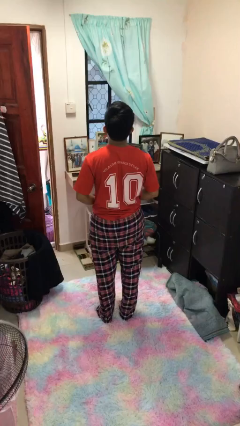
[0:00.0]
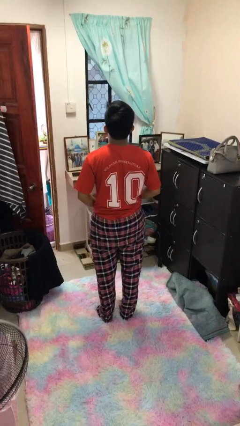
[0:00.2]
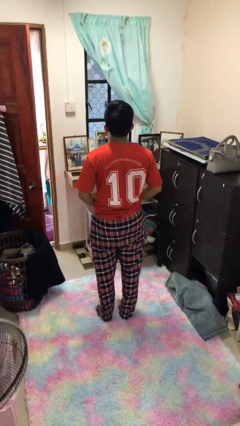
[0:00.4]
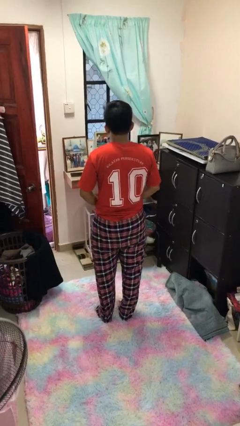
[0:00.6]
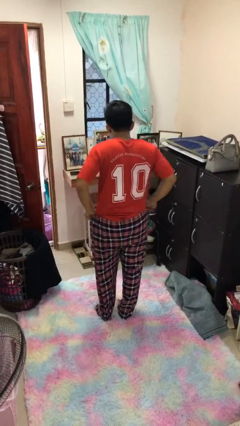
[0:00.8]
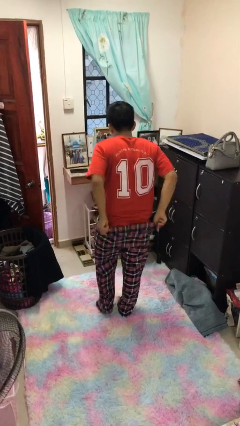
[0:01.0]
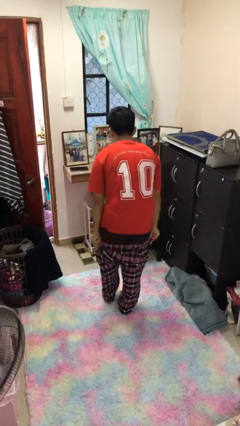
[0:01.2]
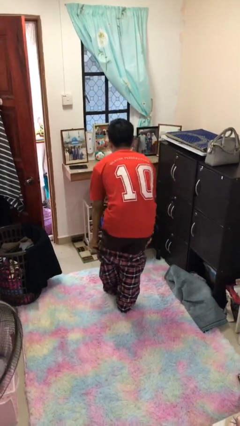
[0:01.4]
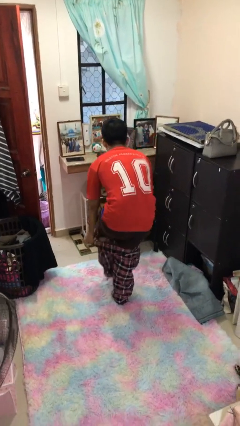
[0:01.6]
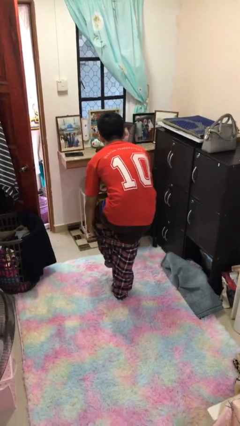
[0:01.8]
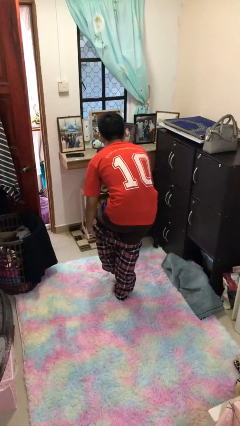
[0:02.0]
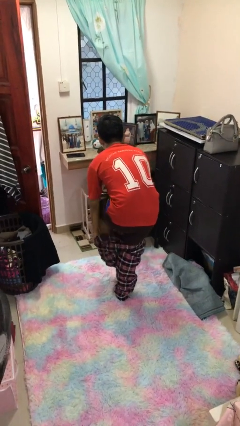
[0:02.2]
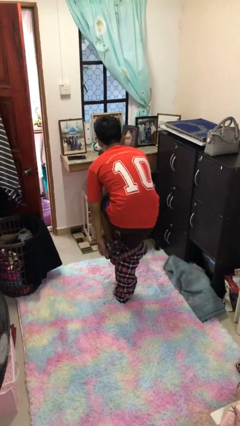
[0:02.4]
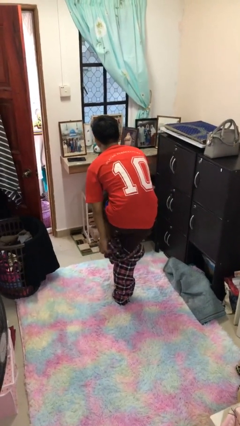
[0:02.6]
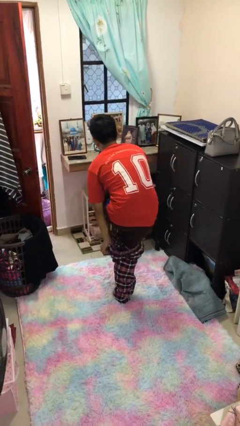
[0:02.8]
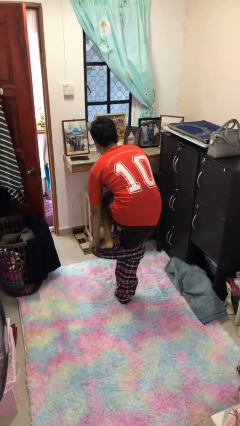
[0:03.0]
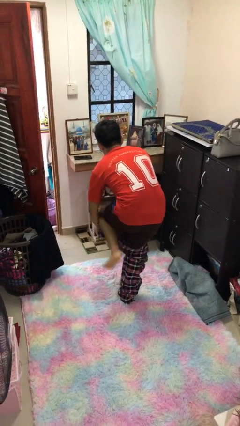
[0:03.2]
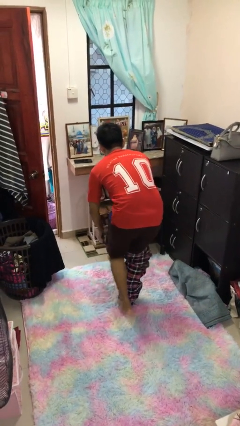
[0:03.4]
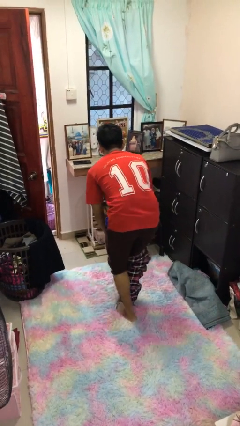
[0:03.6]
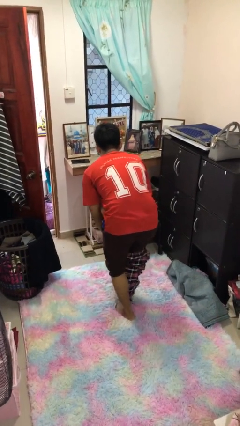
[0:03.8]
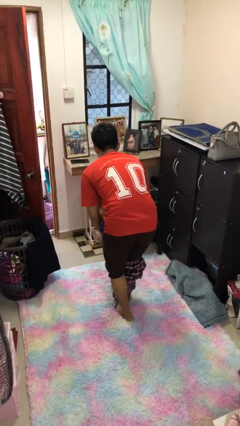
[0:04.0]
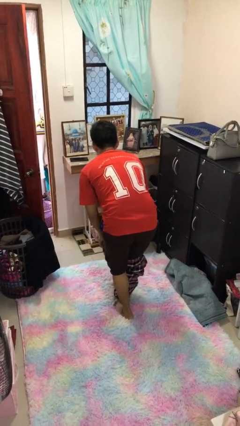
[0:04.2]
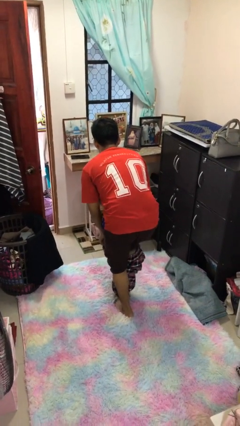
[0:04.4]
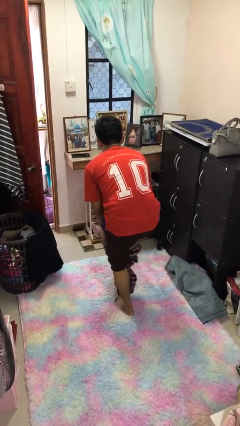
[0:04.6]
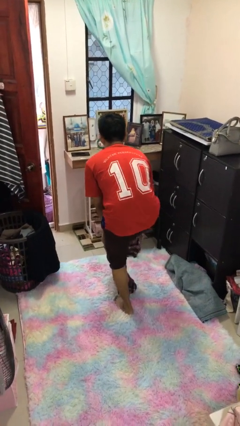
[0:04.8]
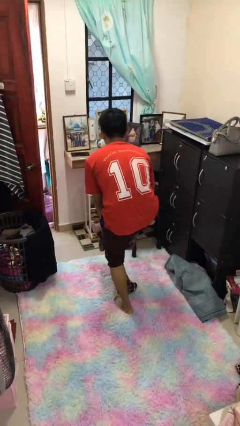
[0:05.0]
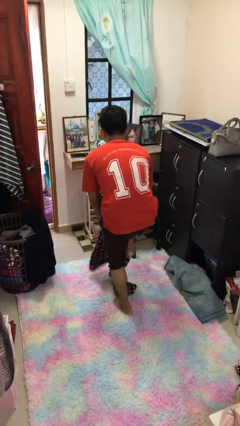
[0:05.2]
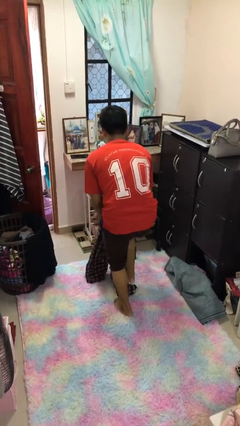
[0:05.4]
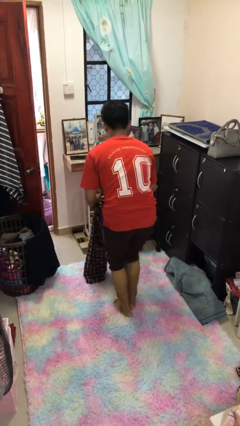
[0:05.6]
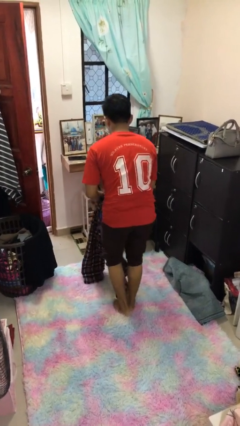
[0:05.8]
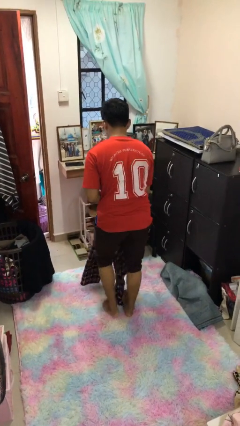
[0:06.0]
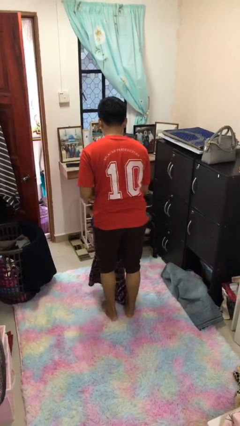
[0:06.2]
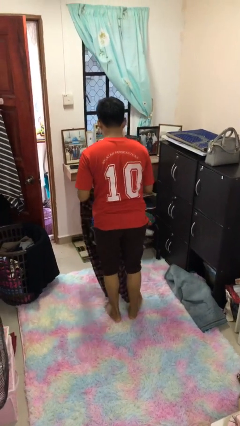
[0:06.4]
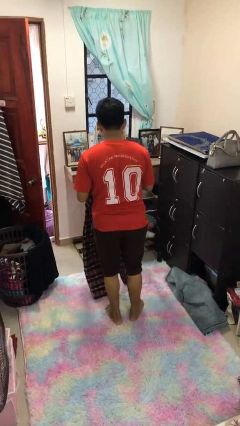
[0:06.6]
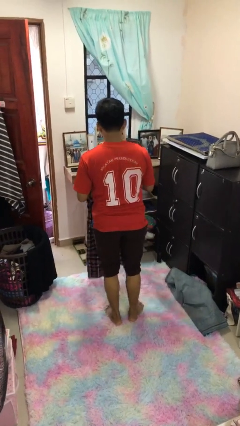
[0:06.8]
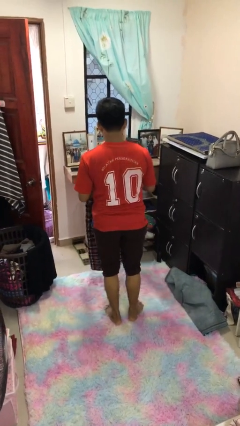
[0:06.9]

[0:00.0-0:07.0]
person takes off pants

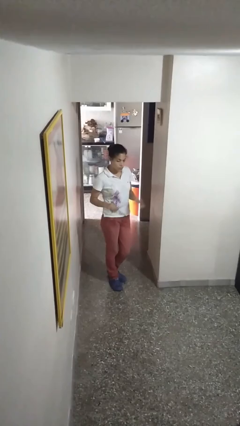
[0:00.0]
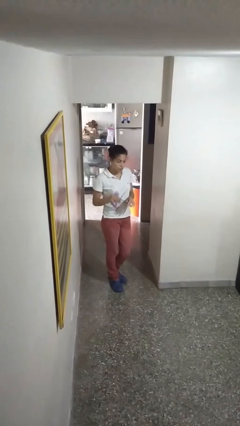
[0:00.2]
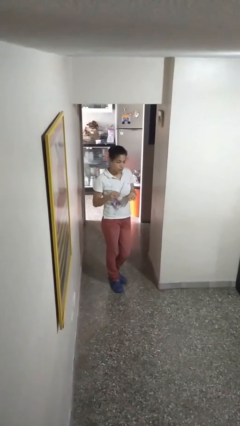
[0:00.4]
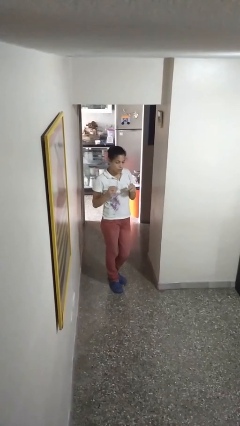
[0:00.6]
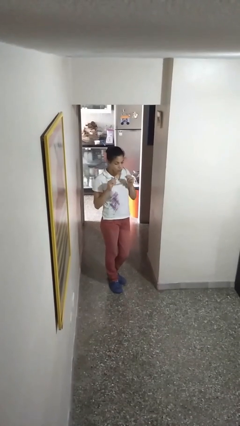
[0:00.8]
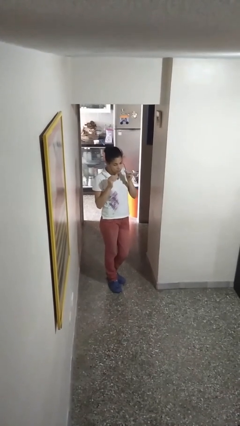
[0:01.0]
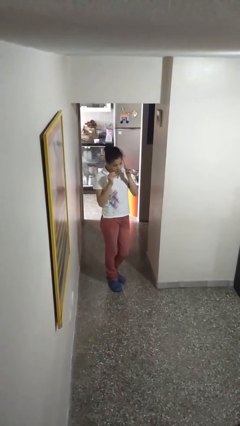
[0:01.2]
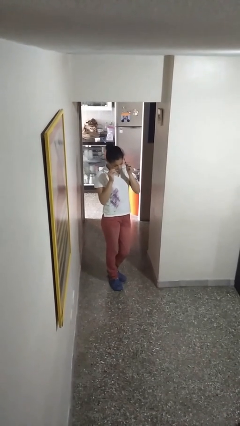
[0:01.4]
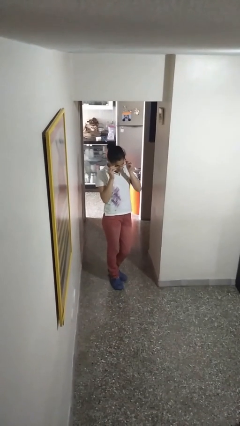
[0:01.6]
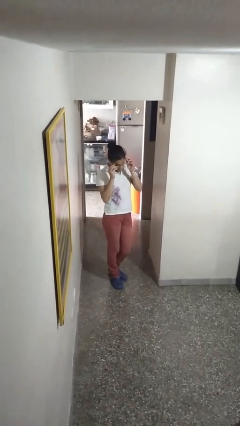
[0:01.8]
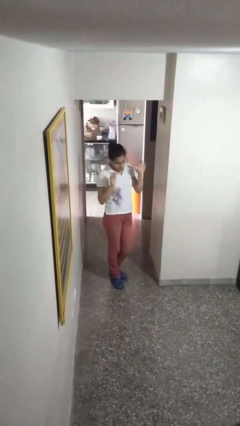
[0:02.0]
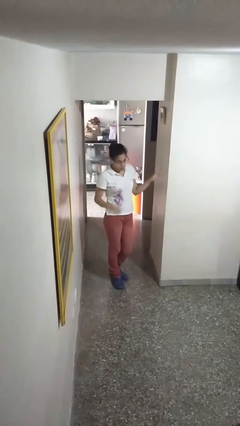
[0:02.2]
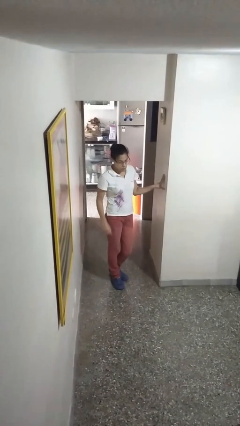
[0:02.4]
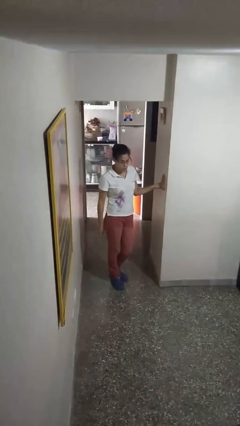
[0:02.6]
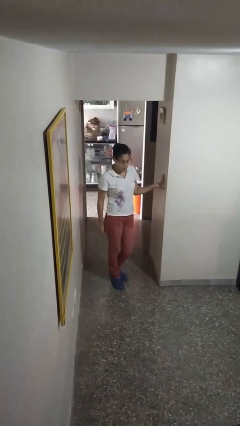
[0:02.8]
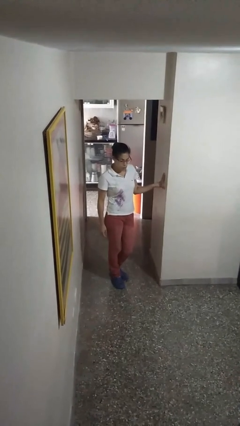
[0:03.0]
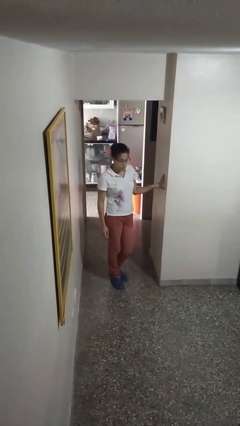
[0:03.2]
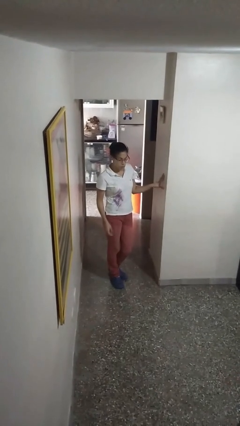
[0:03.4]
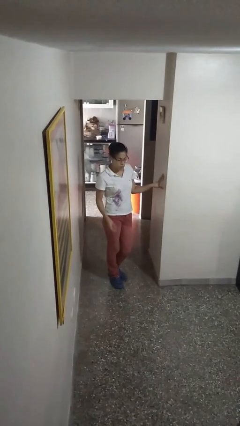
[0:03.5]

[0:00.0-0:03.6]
person puts on glasses

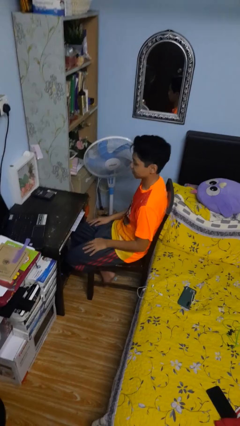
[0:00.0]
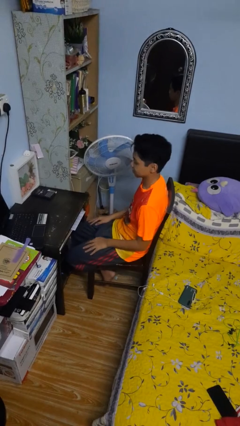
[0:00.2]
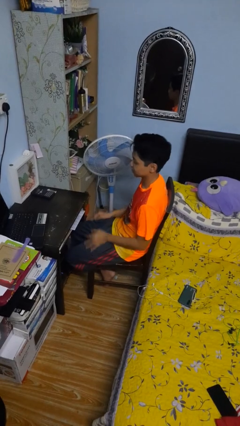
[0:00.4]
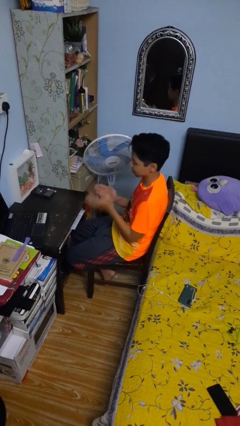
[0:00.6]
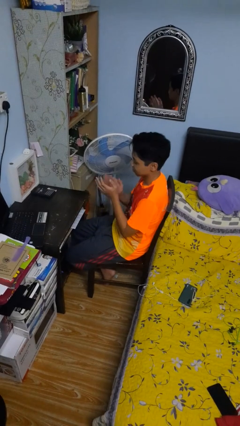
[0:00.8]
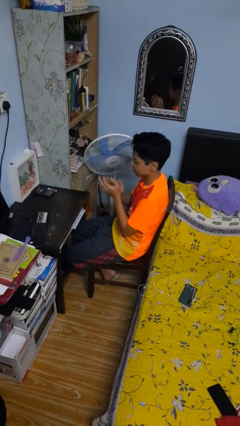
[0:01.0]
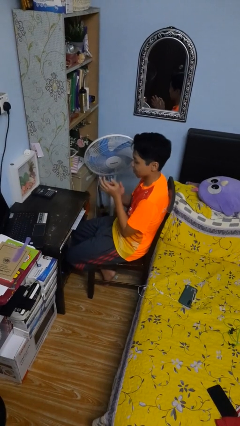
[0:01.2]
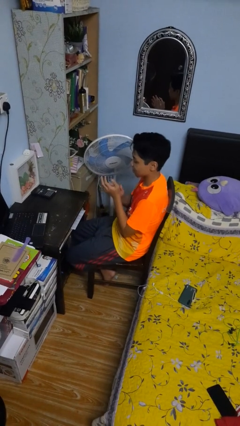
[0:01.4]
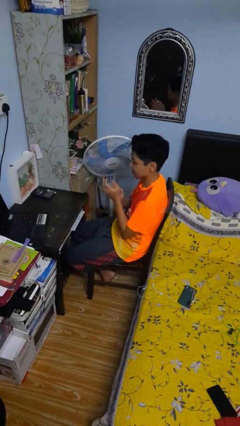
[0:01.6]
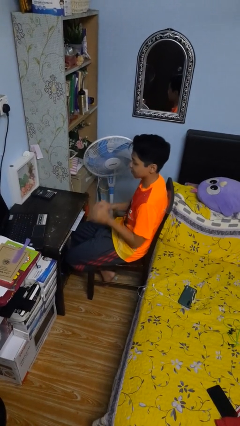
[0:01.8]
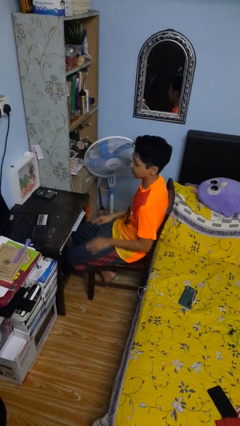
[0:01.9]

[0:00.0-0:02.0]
person claps hands

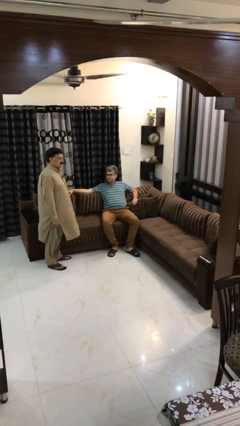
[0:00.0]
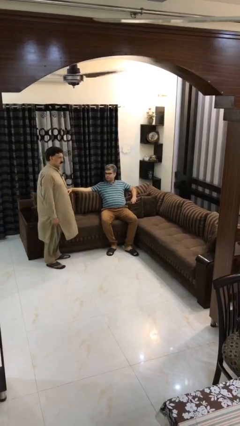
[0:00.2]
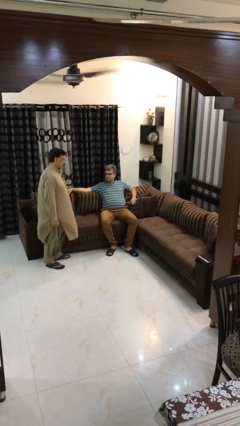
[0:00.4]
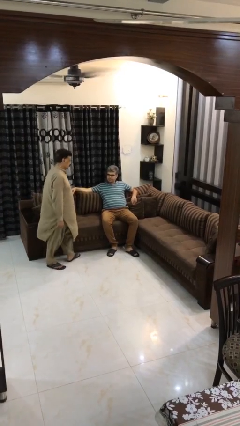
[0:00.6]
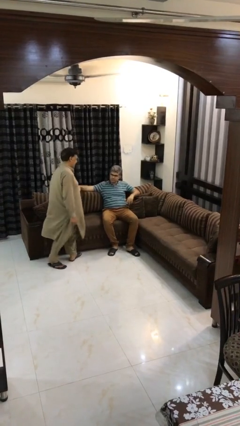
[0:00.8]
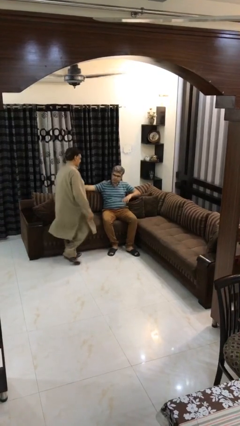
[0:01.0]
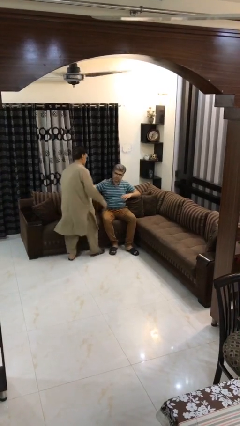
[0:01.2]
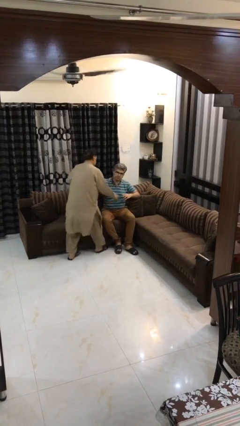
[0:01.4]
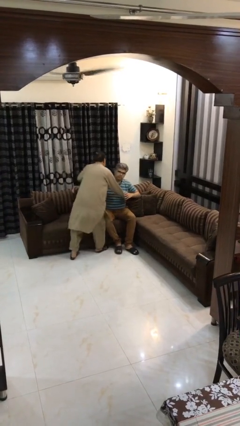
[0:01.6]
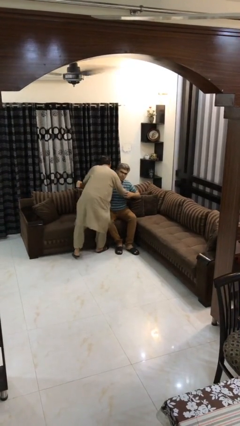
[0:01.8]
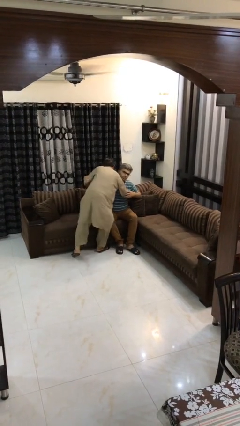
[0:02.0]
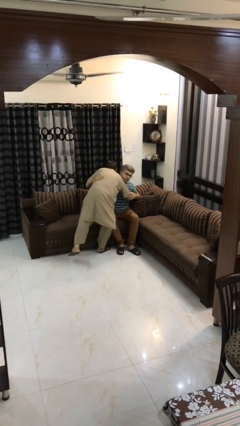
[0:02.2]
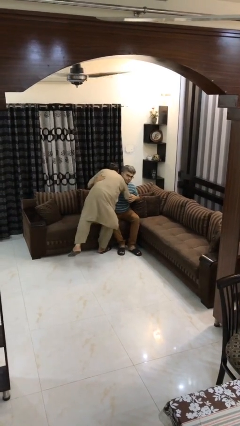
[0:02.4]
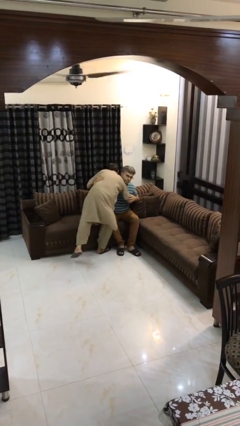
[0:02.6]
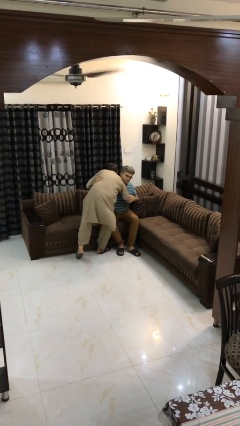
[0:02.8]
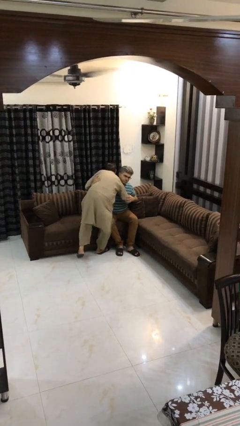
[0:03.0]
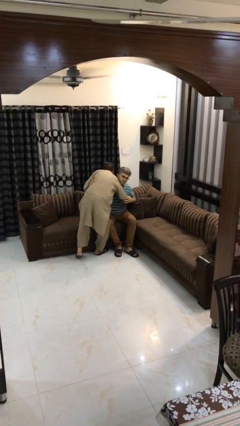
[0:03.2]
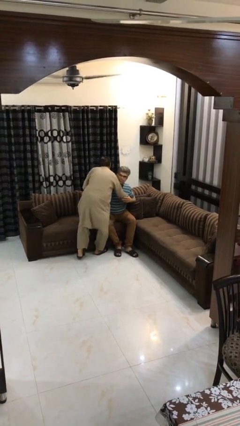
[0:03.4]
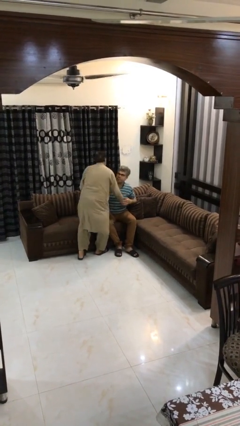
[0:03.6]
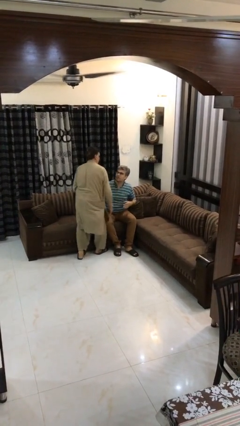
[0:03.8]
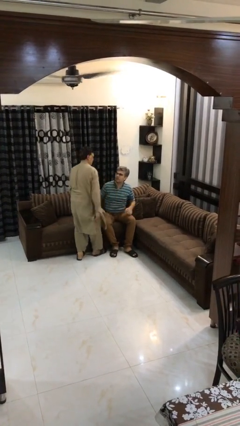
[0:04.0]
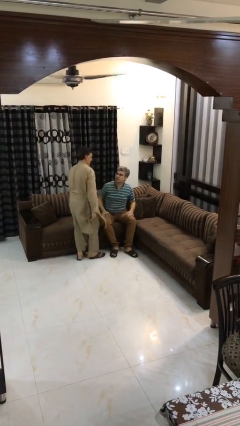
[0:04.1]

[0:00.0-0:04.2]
person embraces person

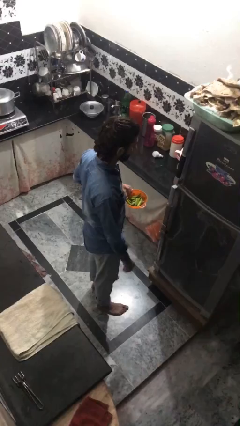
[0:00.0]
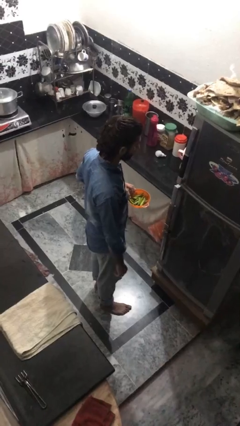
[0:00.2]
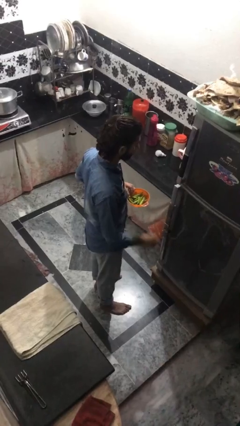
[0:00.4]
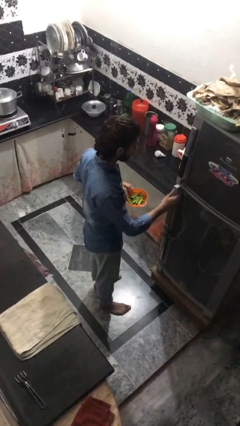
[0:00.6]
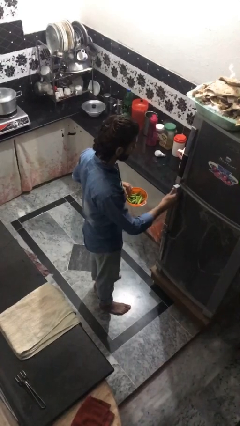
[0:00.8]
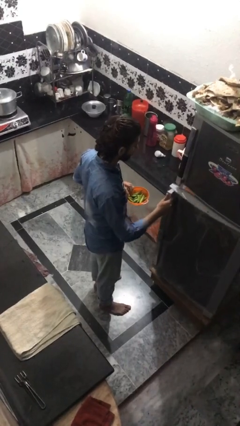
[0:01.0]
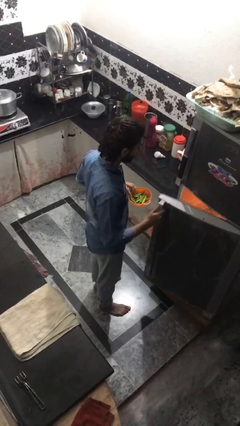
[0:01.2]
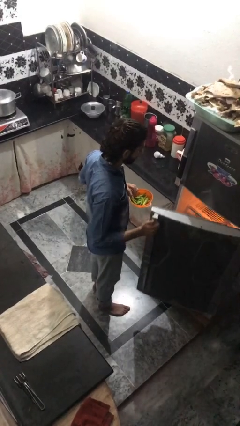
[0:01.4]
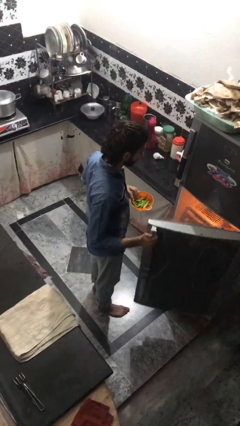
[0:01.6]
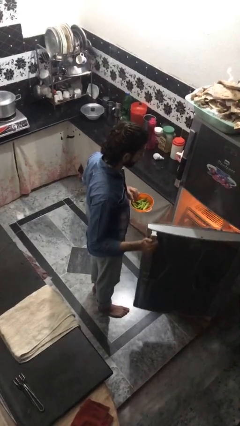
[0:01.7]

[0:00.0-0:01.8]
person opens refrigerator
